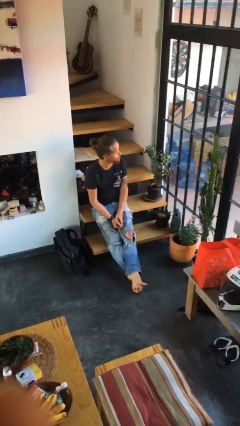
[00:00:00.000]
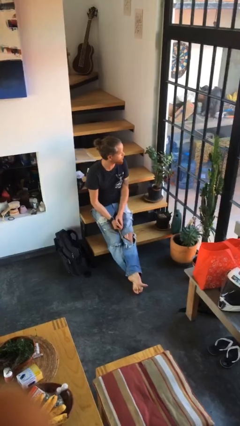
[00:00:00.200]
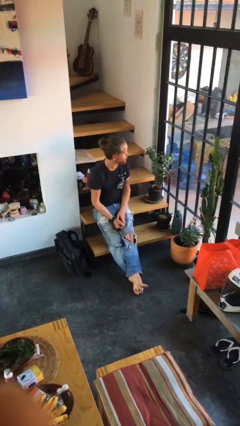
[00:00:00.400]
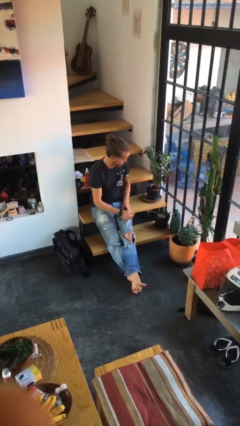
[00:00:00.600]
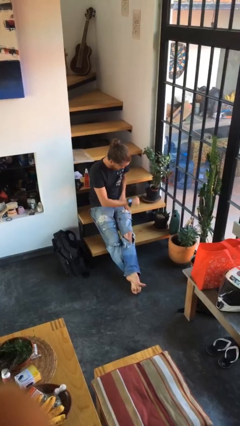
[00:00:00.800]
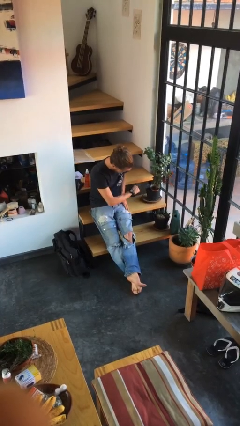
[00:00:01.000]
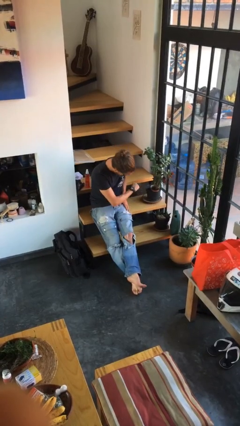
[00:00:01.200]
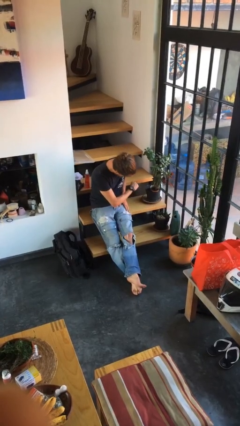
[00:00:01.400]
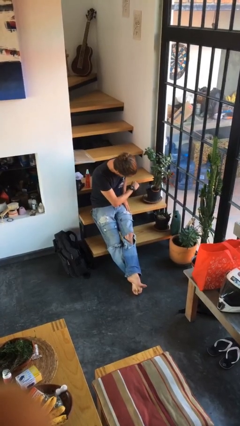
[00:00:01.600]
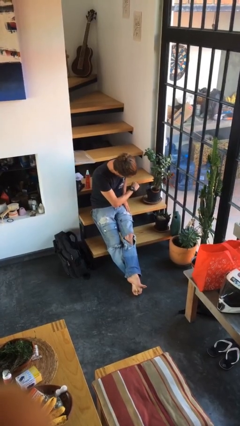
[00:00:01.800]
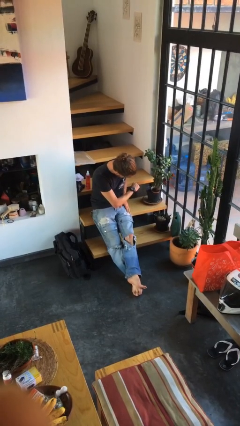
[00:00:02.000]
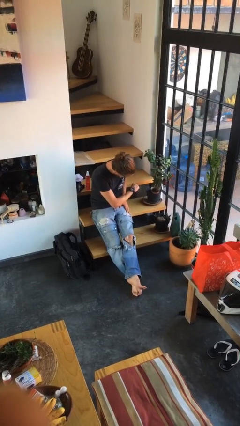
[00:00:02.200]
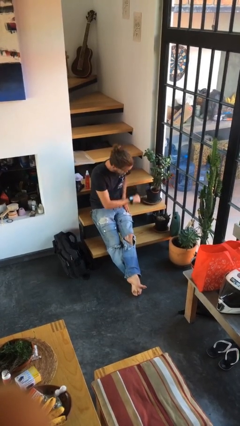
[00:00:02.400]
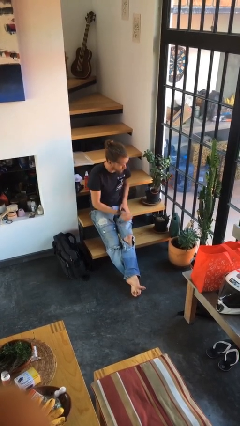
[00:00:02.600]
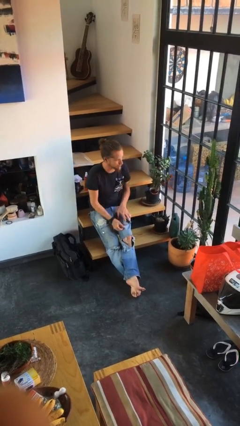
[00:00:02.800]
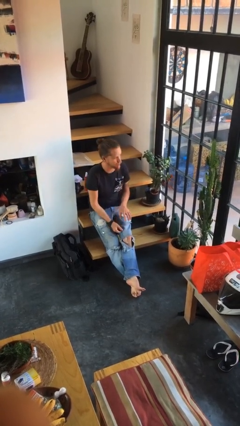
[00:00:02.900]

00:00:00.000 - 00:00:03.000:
person looks at wristwatch

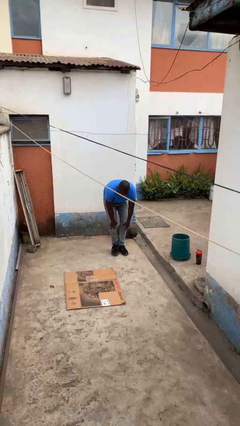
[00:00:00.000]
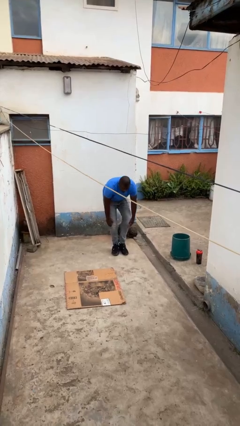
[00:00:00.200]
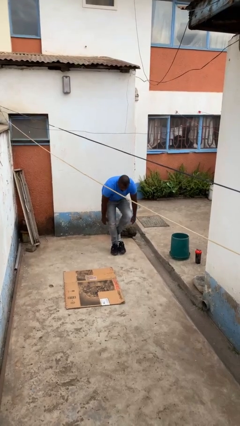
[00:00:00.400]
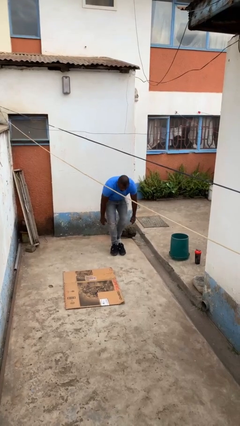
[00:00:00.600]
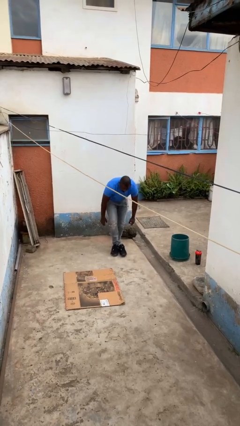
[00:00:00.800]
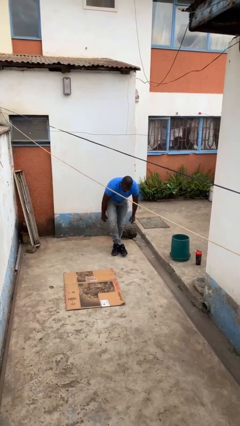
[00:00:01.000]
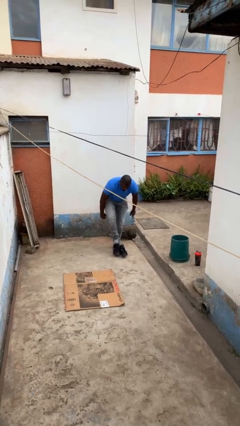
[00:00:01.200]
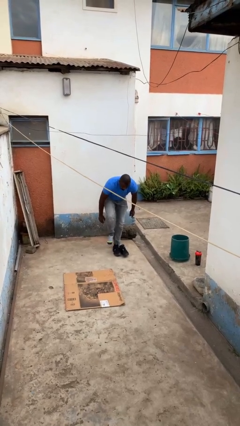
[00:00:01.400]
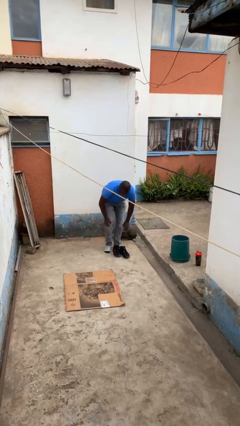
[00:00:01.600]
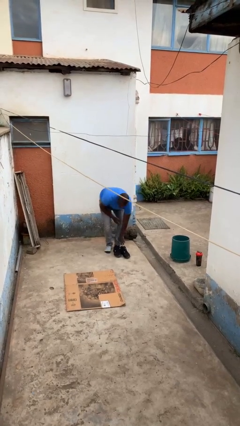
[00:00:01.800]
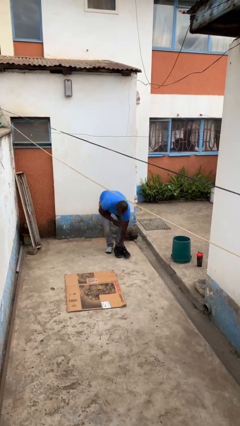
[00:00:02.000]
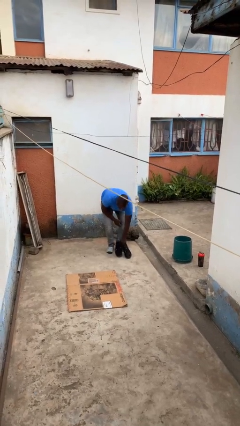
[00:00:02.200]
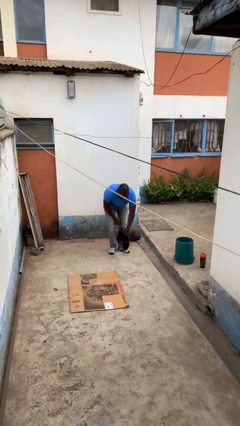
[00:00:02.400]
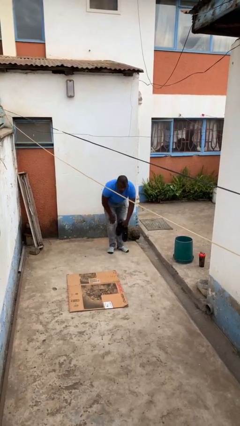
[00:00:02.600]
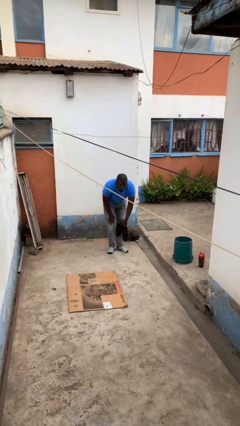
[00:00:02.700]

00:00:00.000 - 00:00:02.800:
person takes off shoes

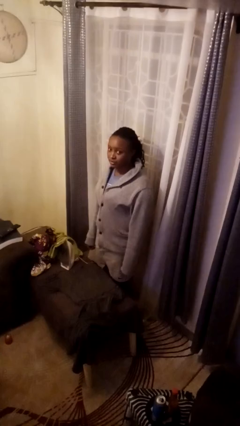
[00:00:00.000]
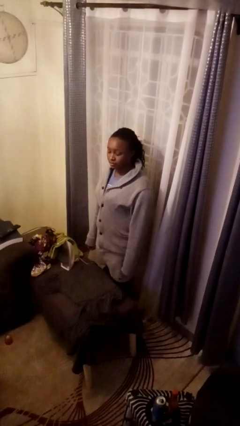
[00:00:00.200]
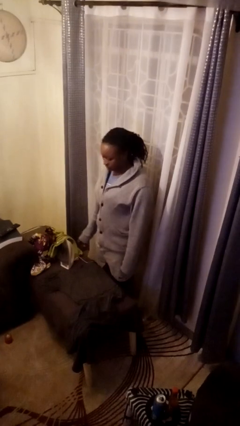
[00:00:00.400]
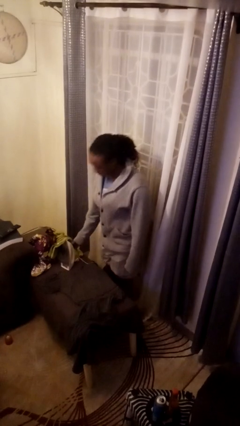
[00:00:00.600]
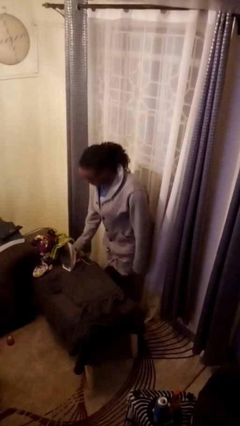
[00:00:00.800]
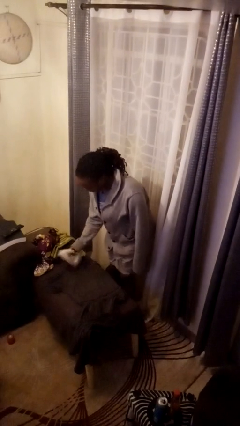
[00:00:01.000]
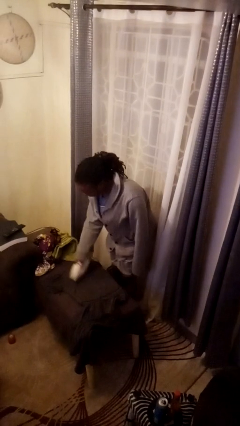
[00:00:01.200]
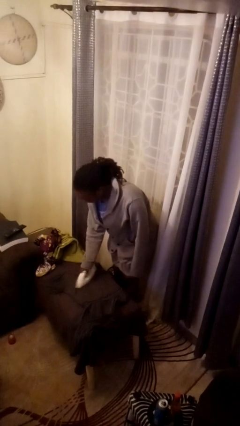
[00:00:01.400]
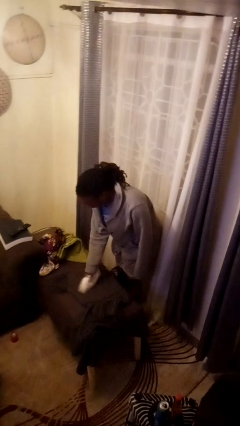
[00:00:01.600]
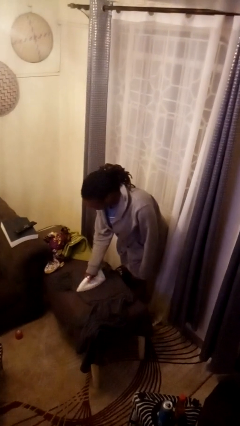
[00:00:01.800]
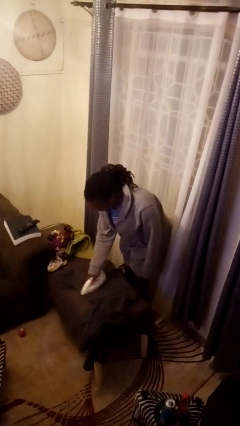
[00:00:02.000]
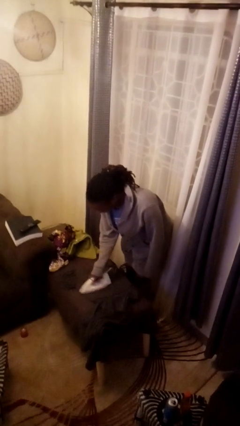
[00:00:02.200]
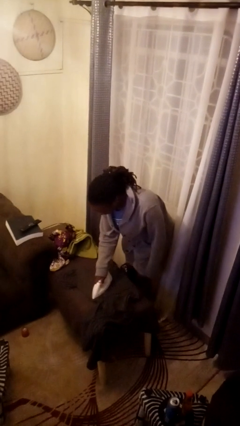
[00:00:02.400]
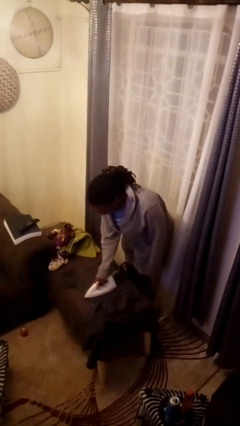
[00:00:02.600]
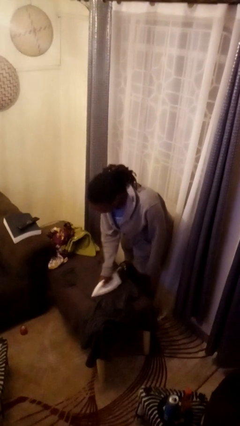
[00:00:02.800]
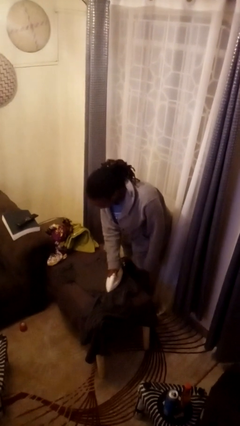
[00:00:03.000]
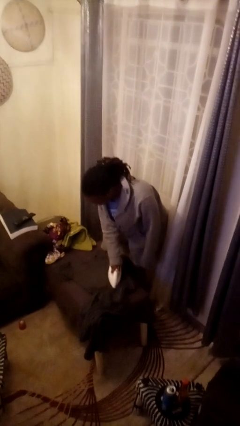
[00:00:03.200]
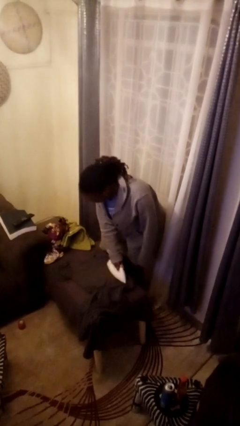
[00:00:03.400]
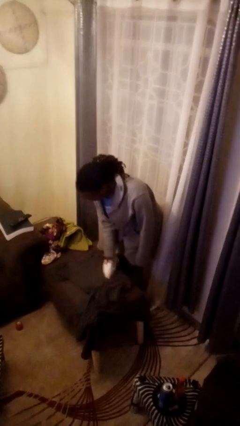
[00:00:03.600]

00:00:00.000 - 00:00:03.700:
person irons clothes

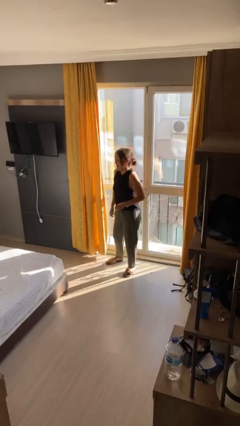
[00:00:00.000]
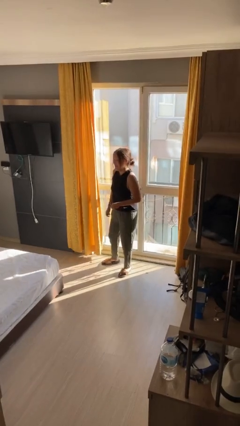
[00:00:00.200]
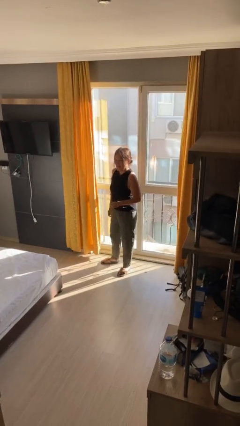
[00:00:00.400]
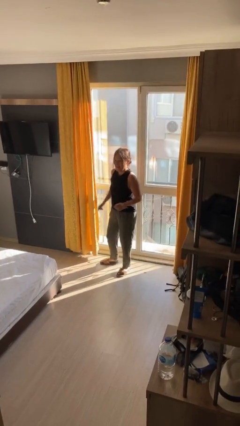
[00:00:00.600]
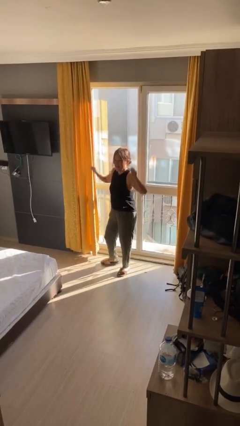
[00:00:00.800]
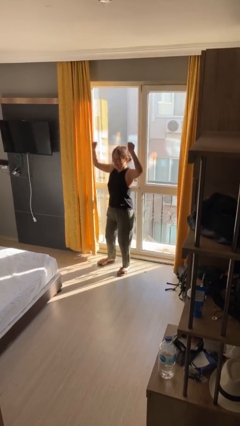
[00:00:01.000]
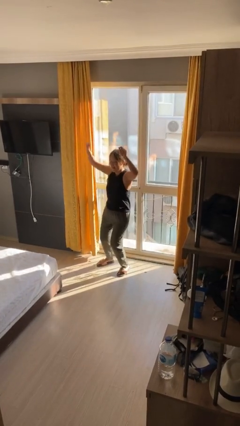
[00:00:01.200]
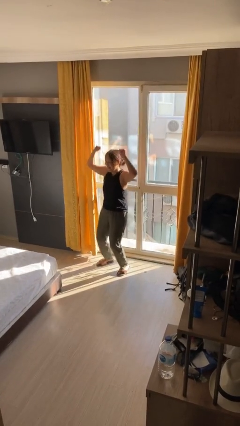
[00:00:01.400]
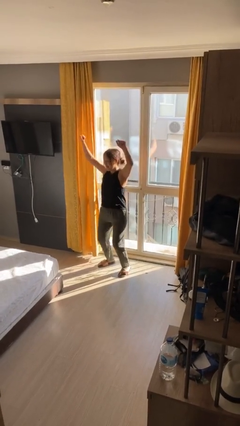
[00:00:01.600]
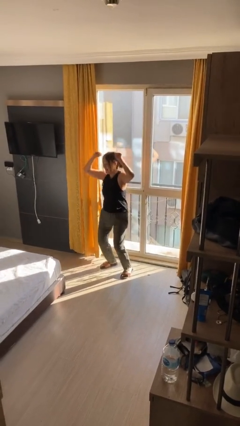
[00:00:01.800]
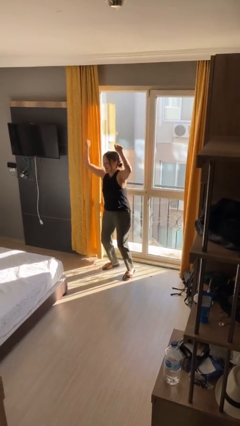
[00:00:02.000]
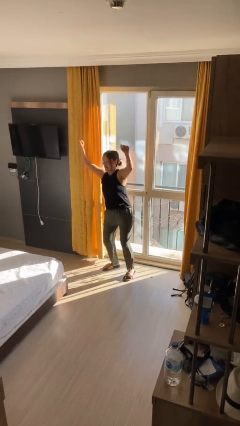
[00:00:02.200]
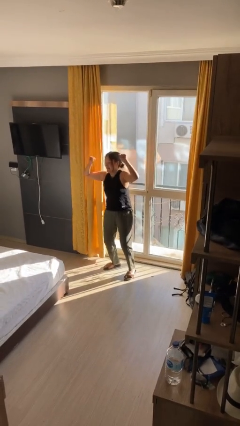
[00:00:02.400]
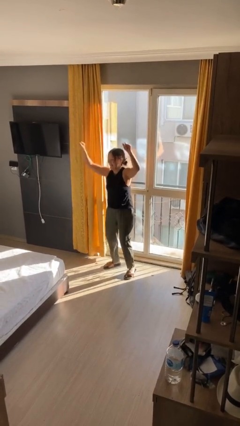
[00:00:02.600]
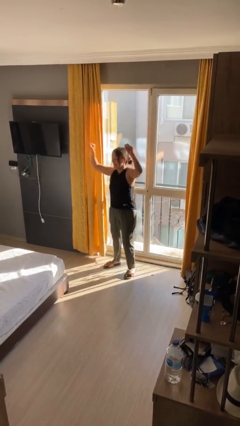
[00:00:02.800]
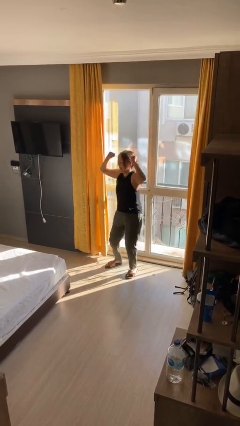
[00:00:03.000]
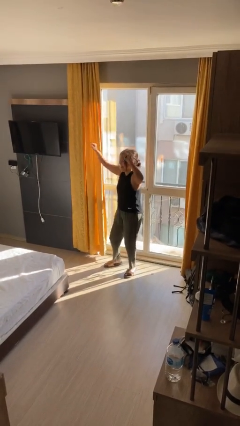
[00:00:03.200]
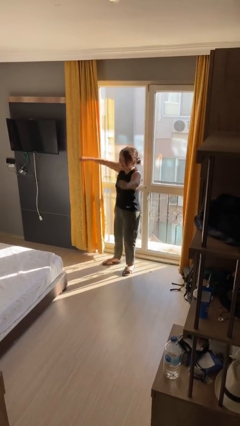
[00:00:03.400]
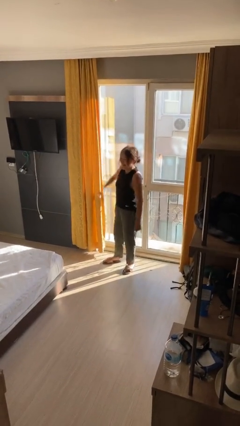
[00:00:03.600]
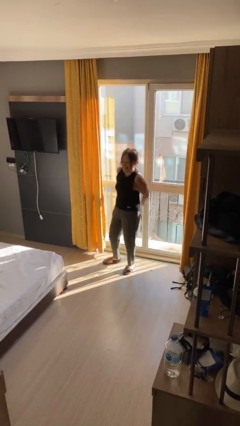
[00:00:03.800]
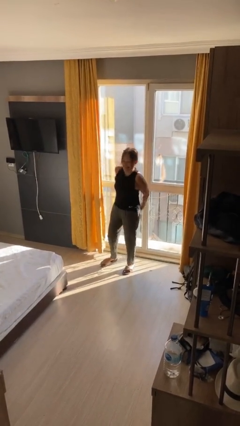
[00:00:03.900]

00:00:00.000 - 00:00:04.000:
person dances in place

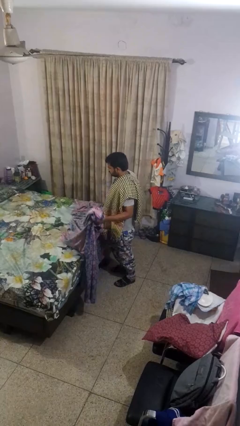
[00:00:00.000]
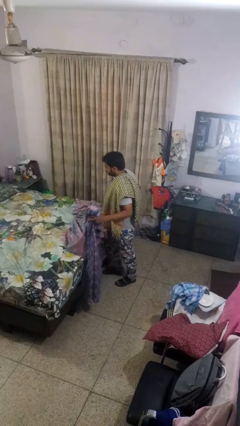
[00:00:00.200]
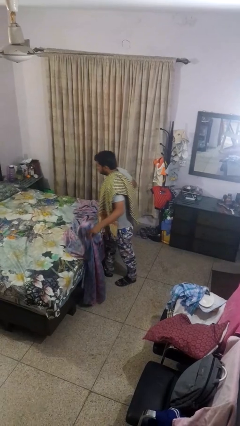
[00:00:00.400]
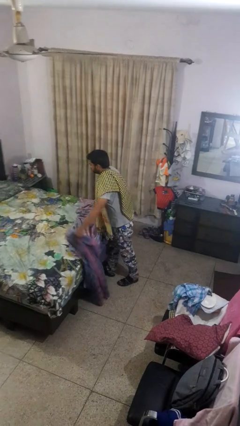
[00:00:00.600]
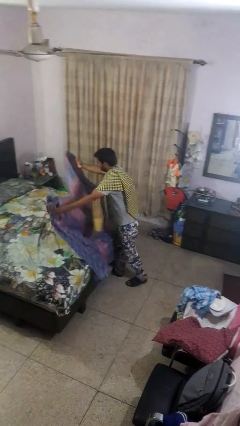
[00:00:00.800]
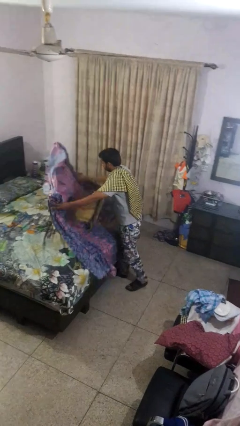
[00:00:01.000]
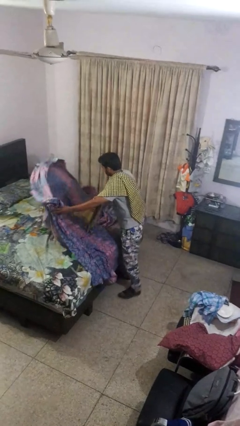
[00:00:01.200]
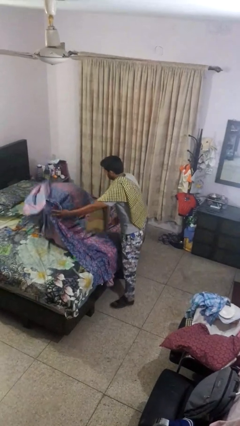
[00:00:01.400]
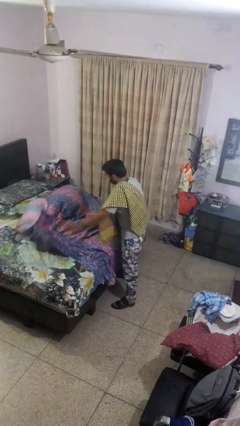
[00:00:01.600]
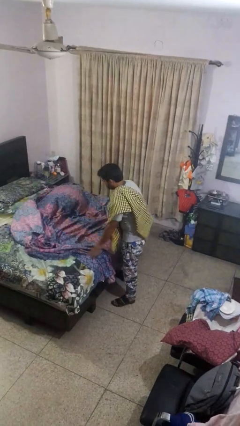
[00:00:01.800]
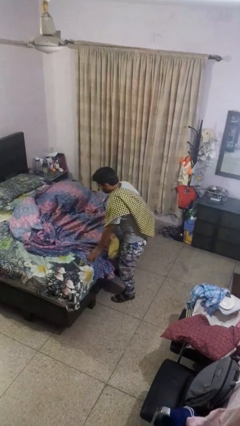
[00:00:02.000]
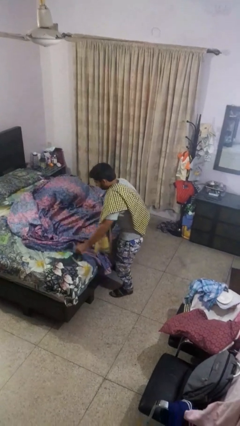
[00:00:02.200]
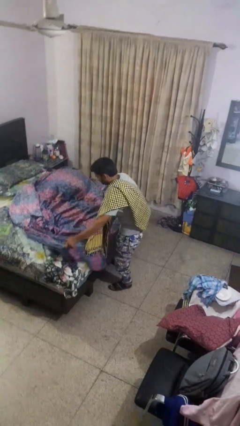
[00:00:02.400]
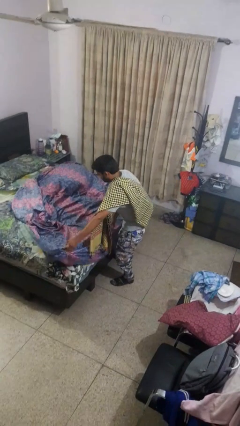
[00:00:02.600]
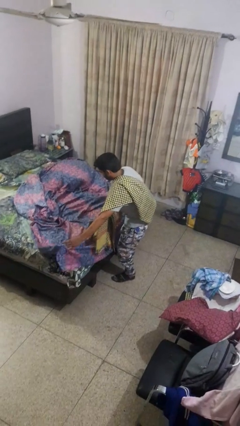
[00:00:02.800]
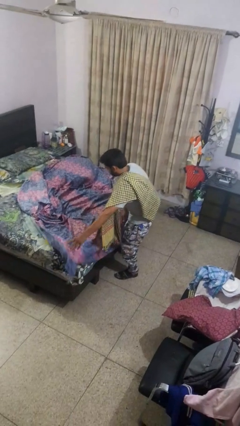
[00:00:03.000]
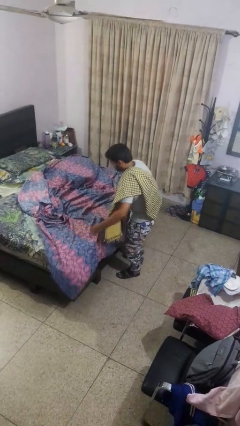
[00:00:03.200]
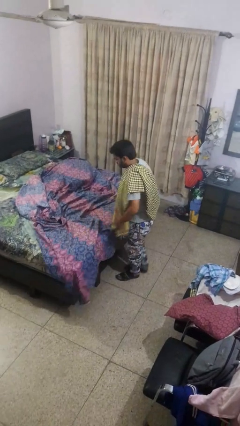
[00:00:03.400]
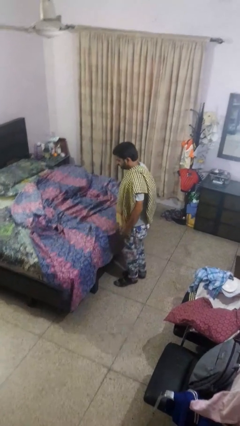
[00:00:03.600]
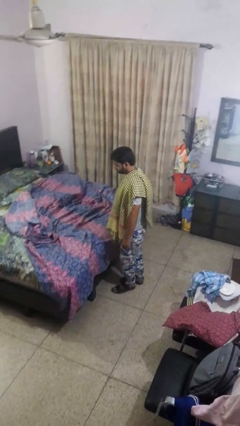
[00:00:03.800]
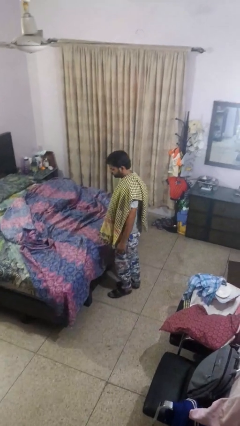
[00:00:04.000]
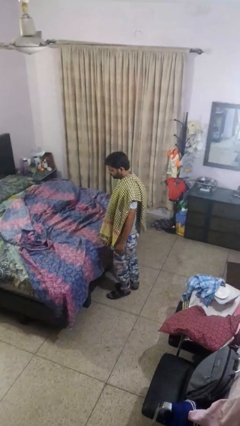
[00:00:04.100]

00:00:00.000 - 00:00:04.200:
person makes bed
